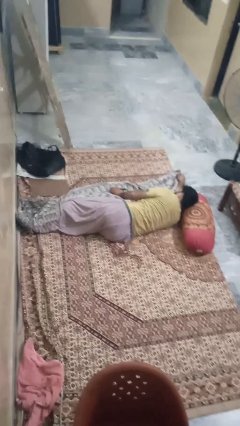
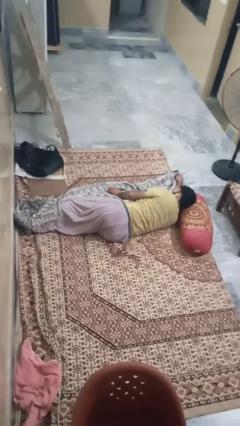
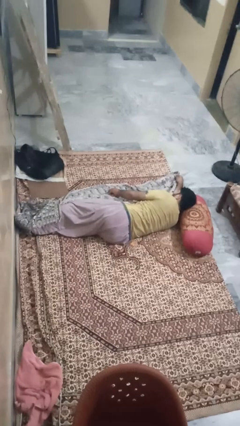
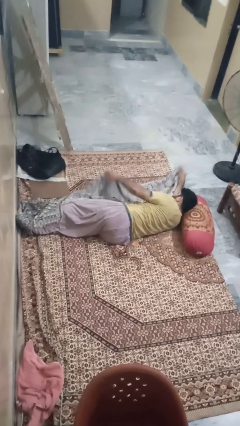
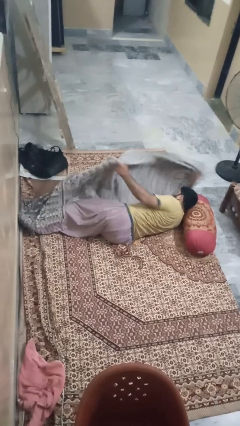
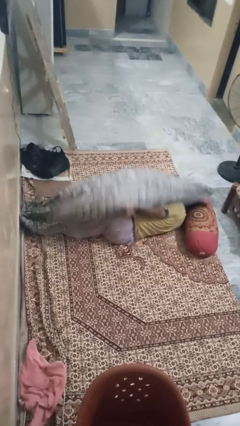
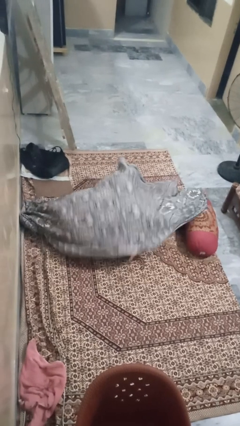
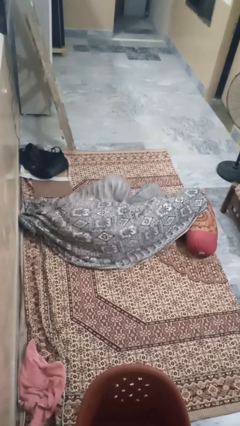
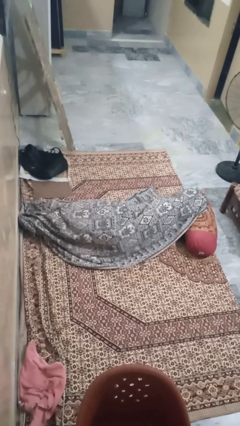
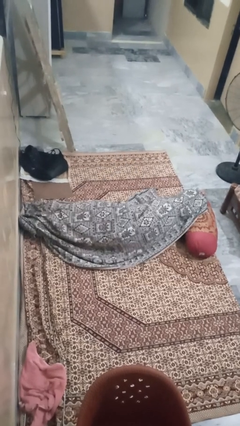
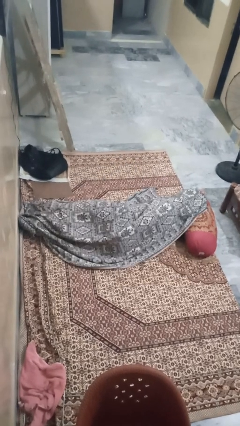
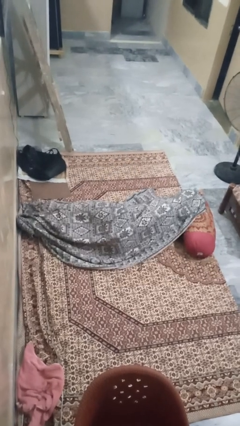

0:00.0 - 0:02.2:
person covers with blanket

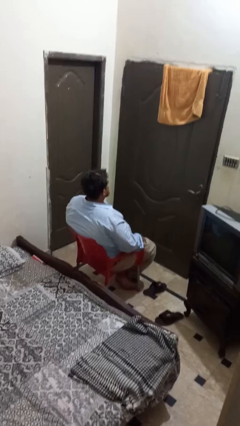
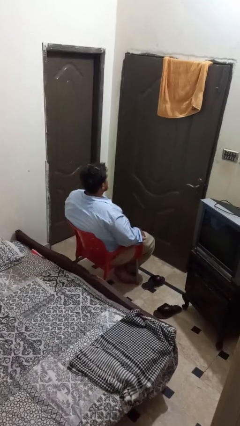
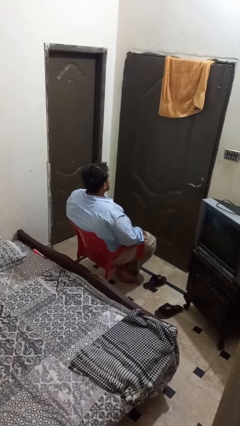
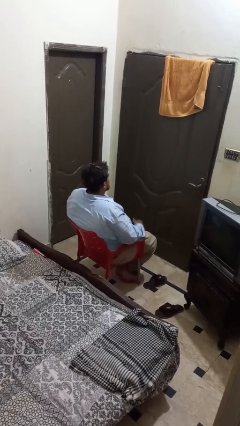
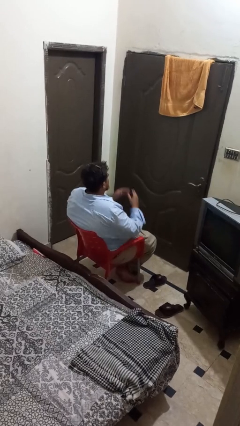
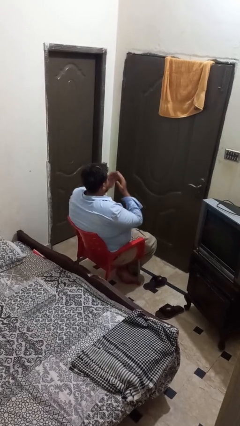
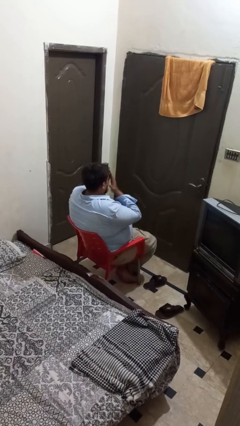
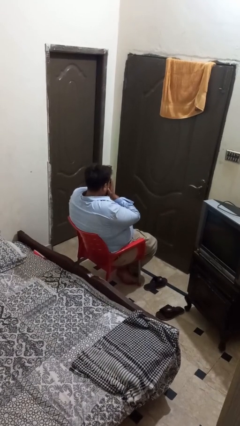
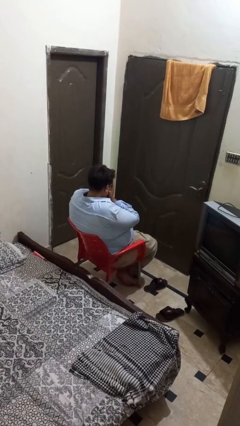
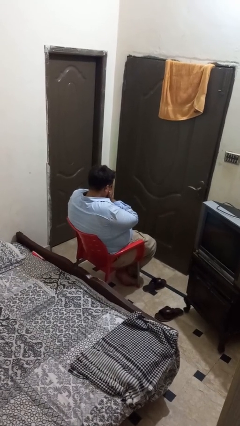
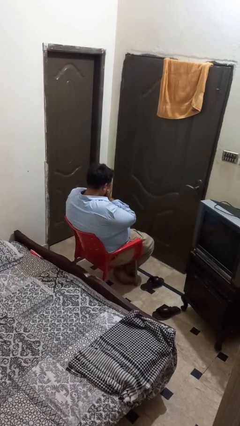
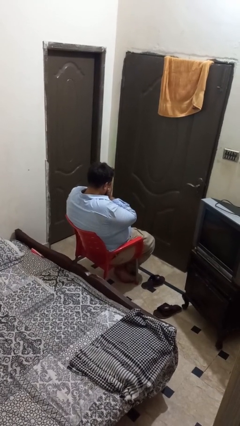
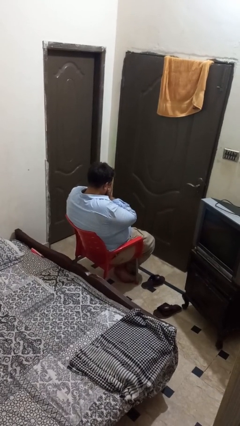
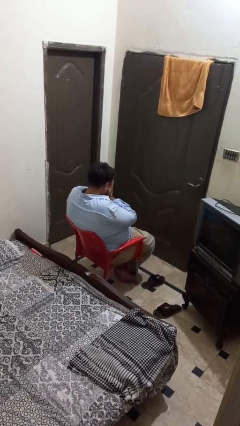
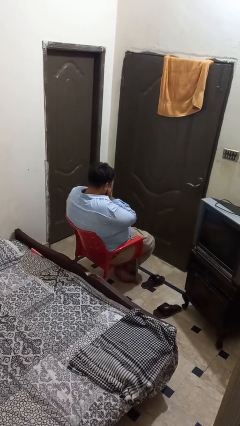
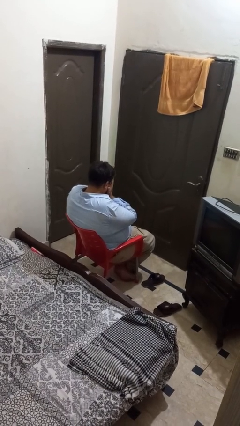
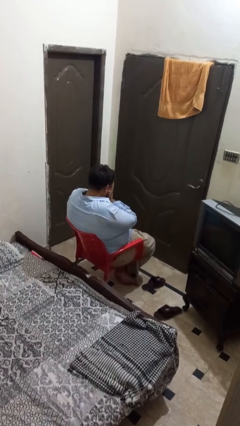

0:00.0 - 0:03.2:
person covers face with hands

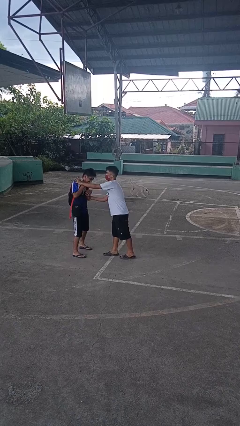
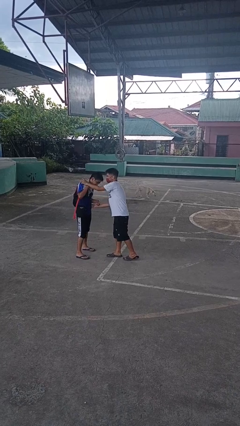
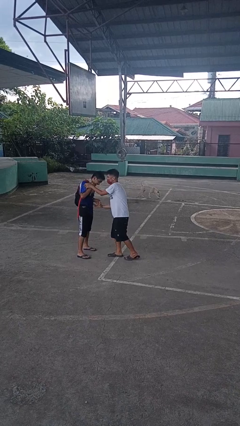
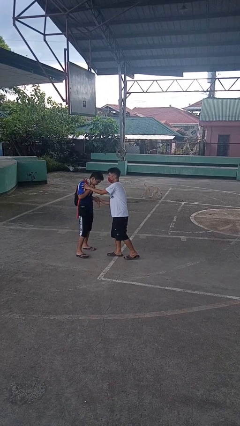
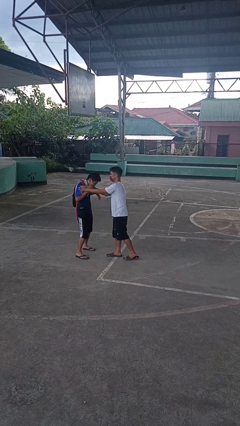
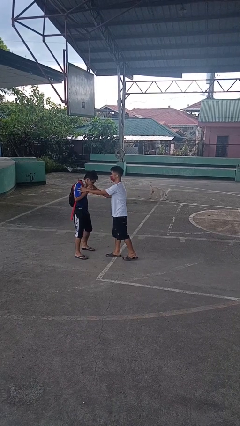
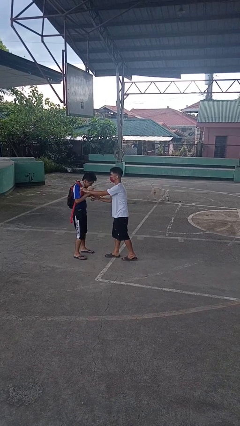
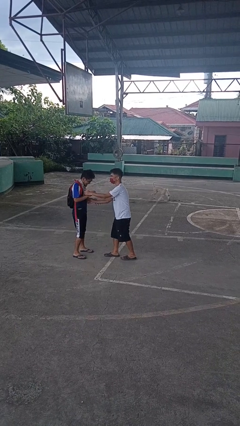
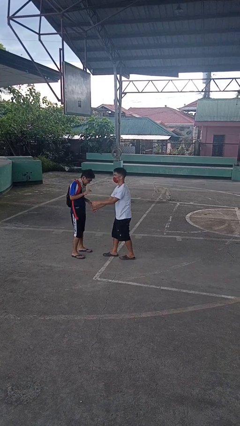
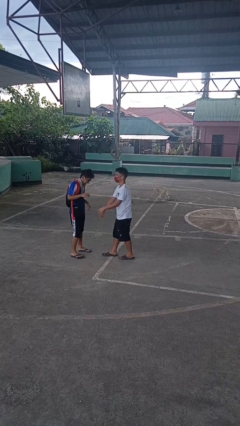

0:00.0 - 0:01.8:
person tickles person

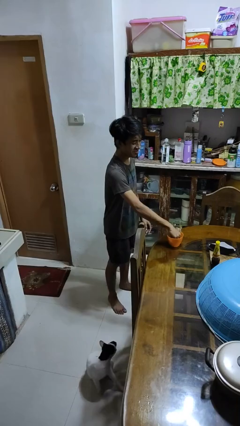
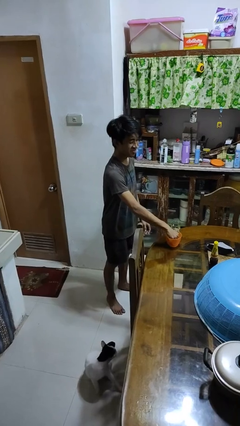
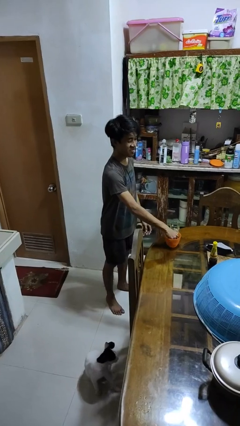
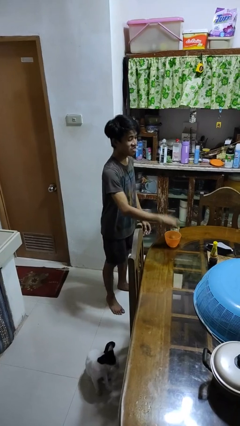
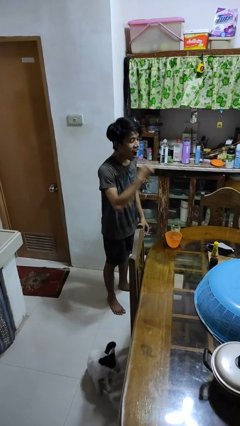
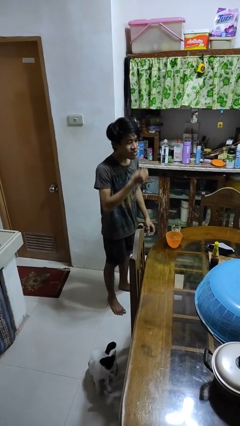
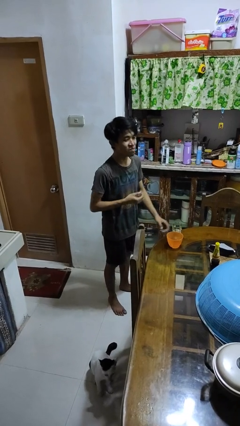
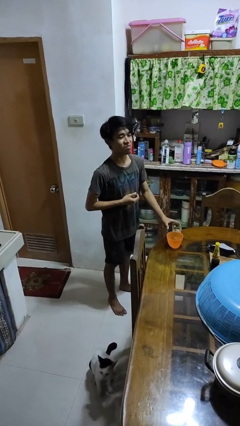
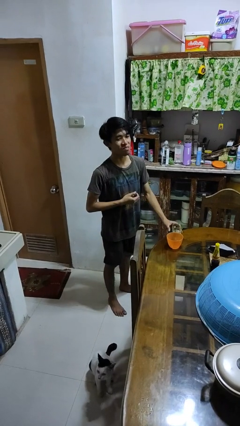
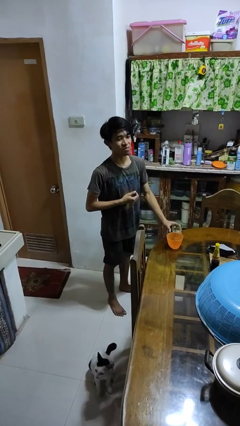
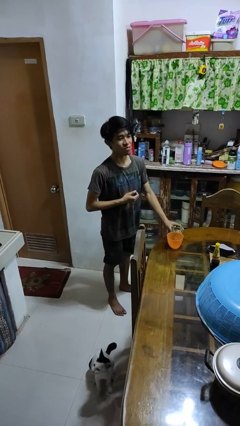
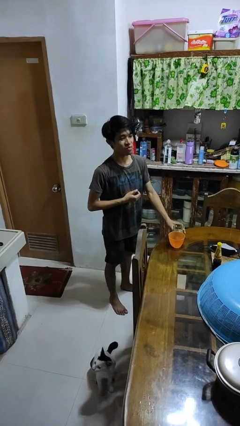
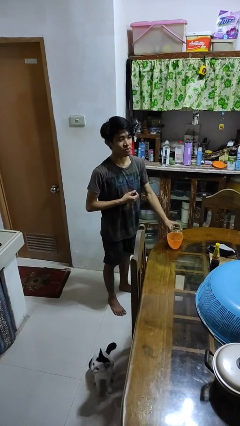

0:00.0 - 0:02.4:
person takes medicine pills

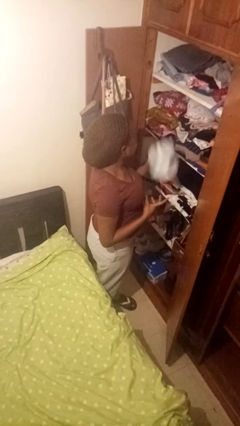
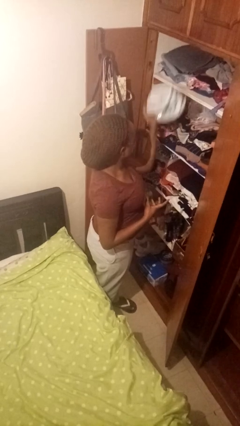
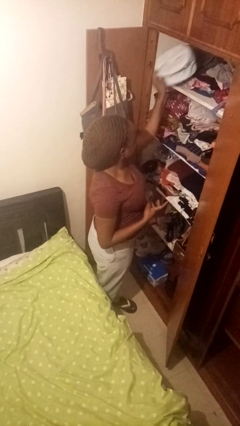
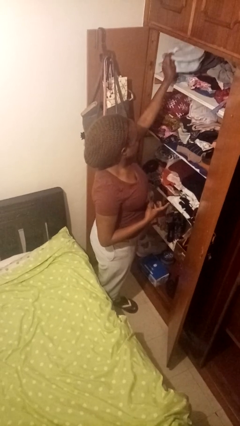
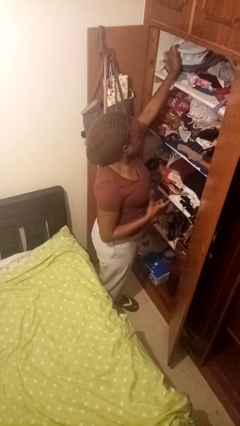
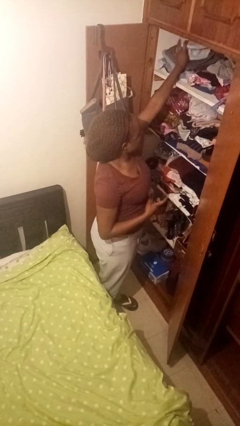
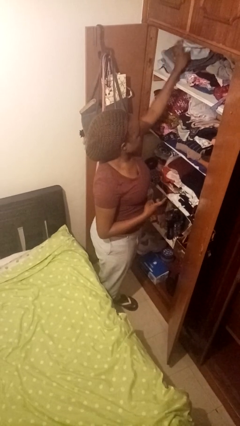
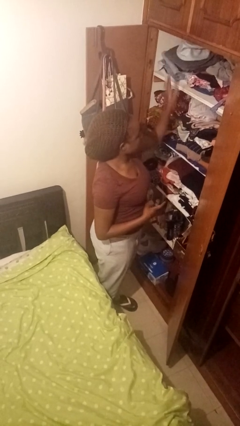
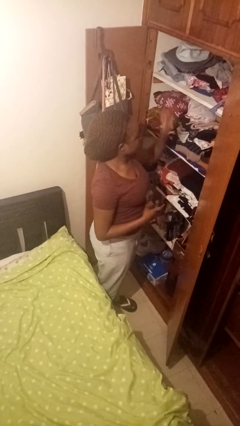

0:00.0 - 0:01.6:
person puts down object on shelf

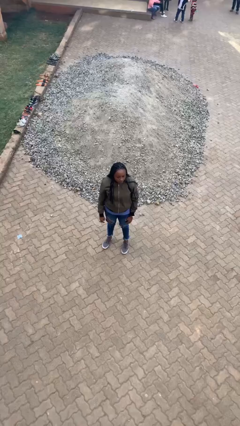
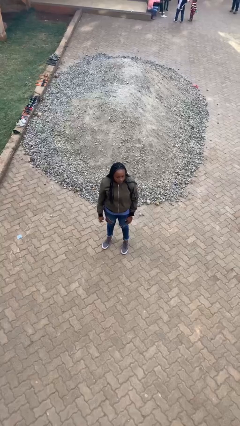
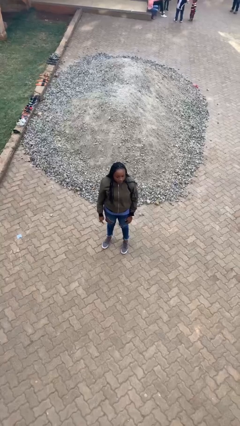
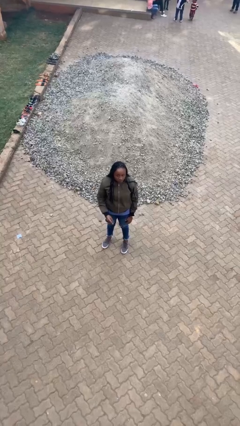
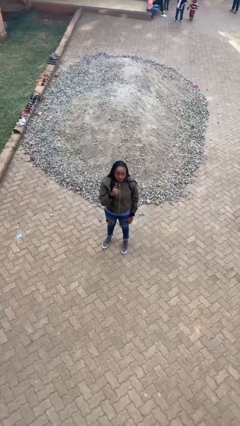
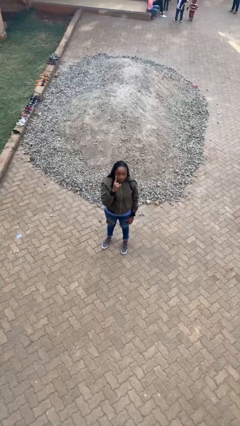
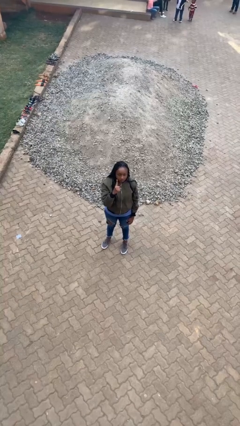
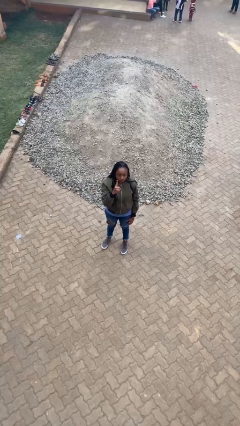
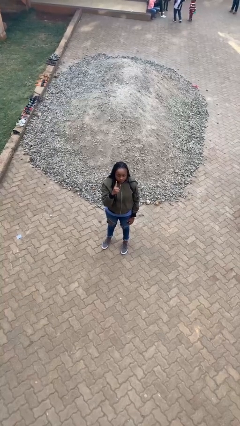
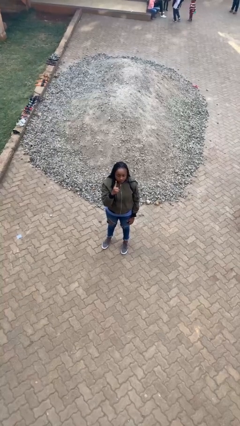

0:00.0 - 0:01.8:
person gestures number one

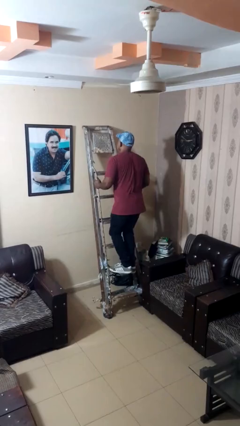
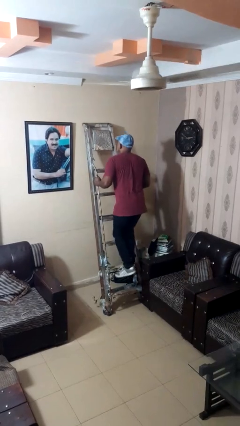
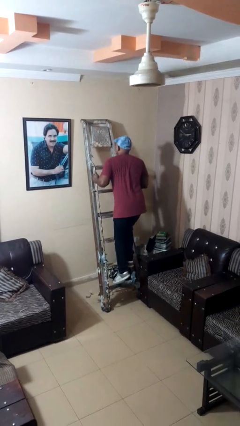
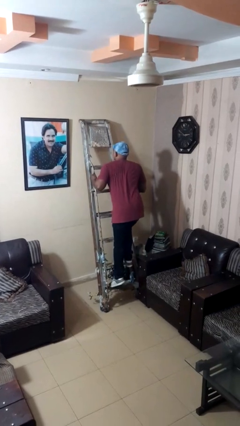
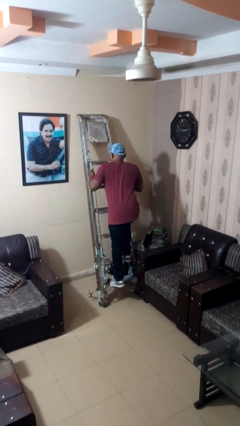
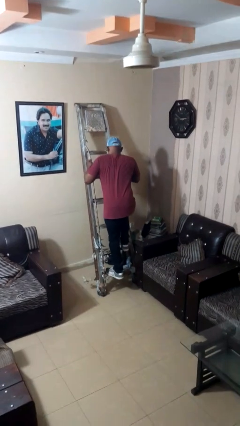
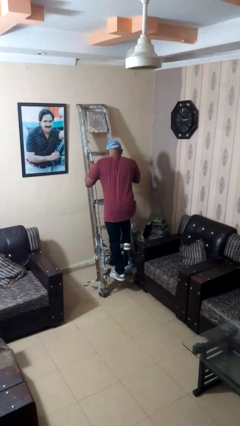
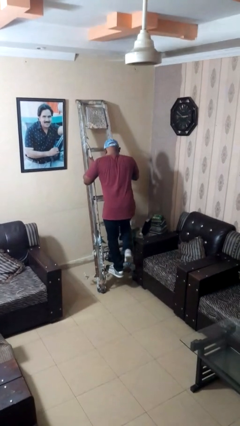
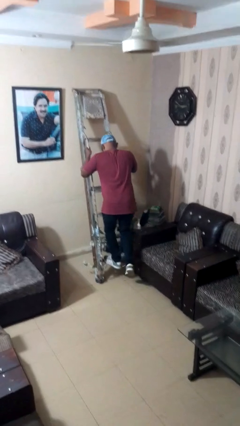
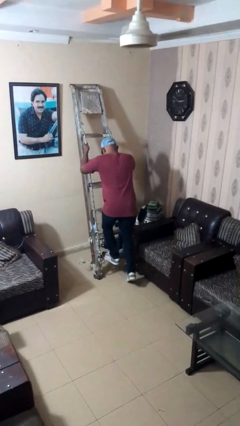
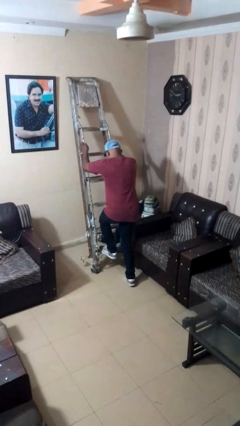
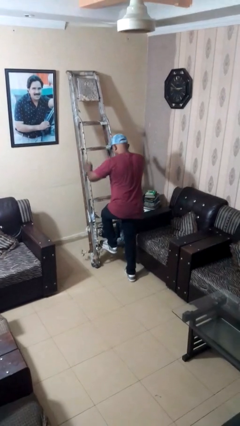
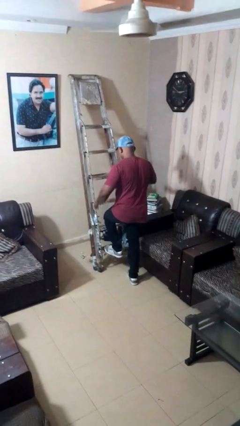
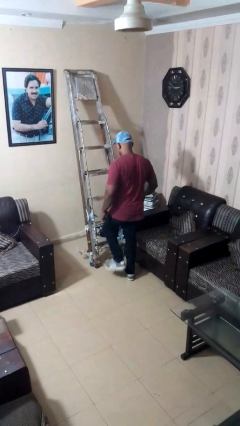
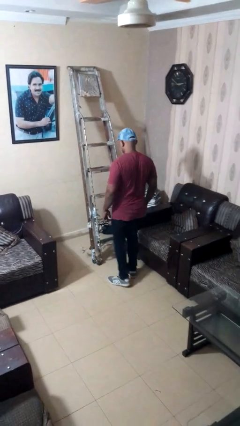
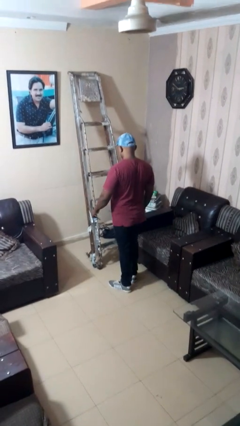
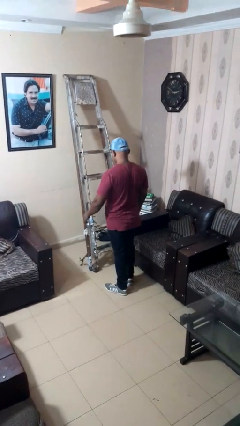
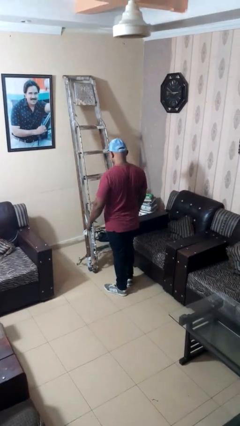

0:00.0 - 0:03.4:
person climbs down ladder

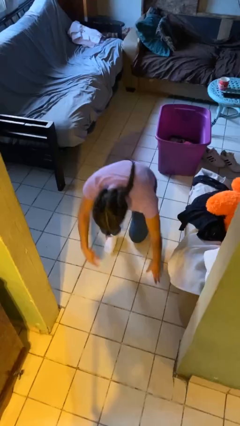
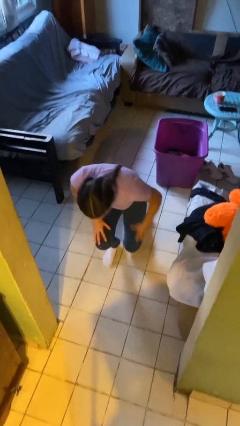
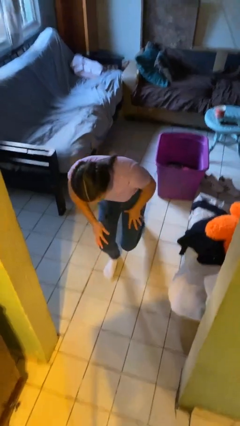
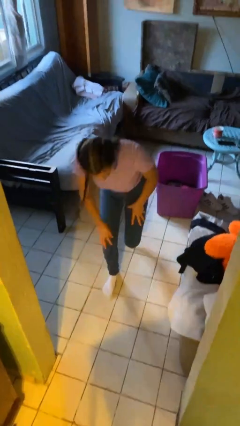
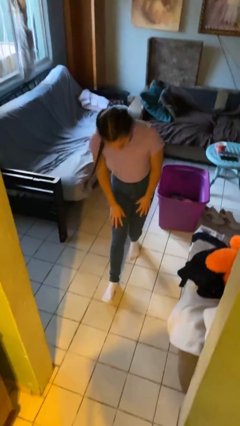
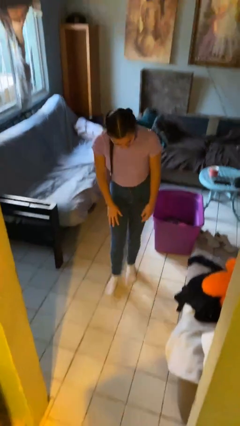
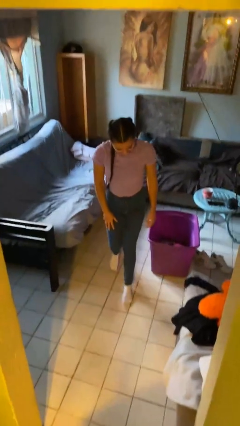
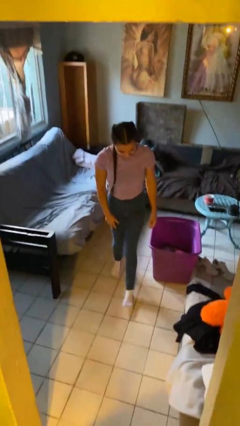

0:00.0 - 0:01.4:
person stands up from floor
